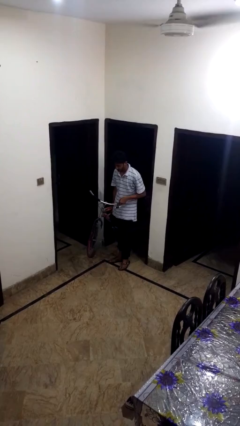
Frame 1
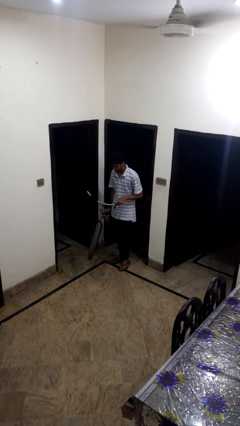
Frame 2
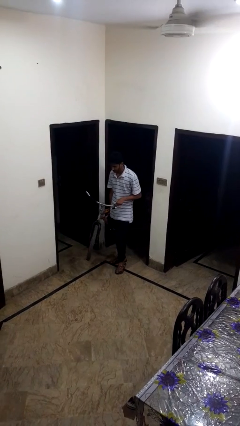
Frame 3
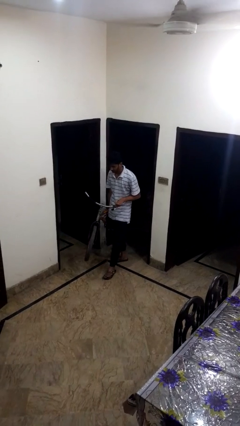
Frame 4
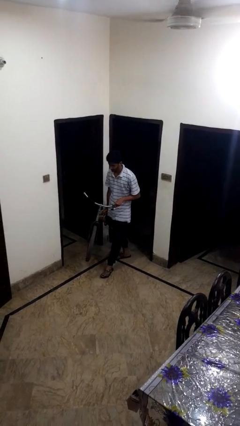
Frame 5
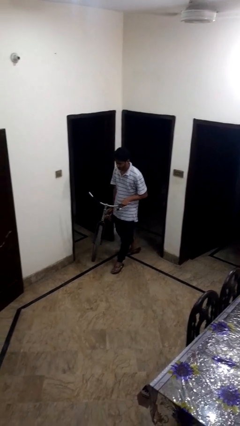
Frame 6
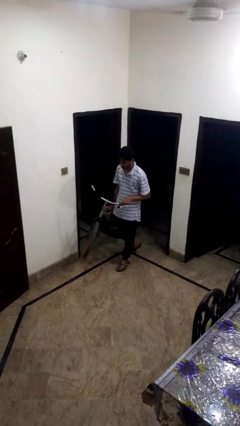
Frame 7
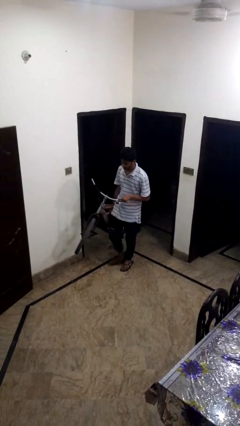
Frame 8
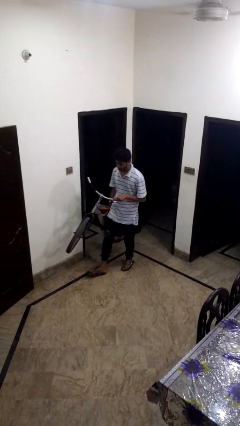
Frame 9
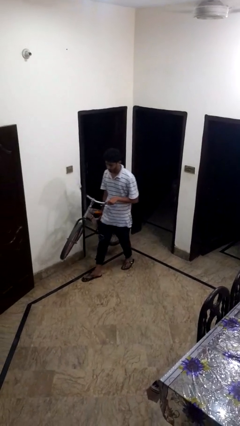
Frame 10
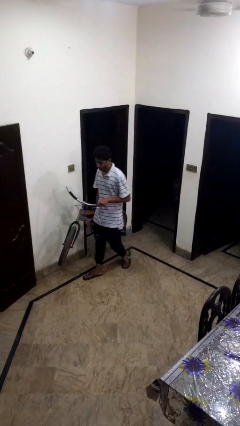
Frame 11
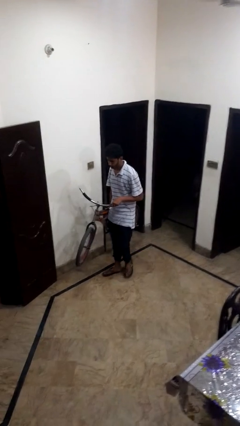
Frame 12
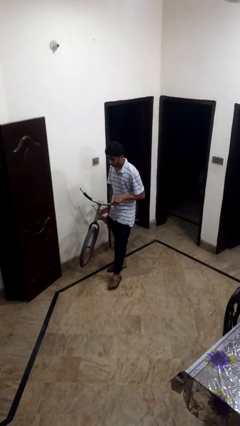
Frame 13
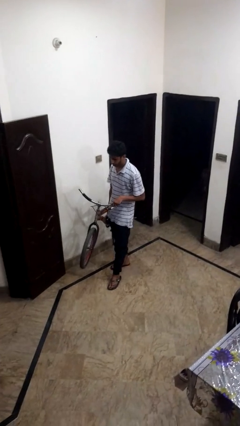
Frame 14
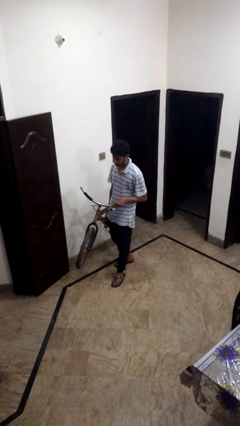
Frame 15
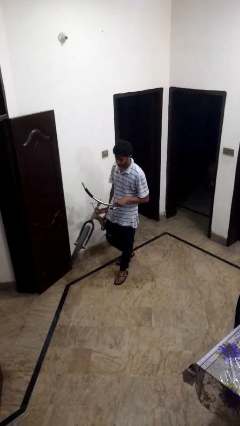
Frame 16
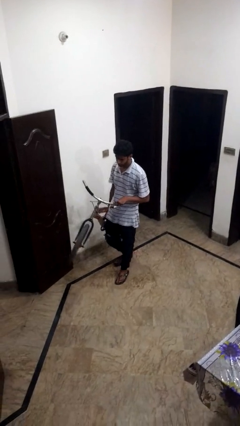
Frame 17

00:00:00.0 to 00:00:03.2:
person carries bicycle

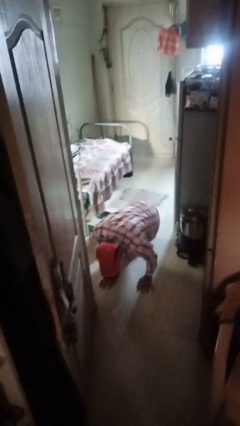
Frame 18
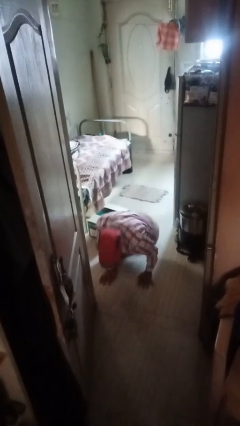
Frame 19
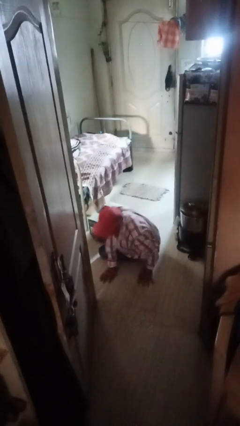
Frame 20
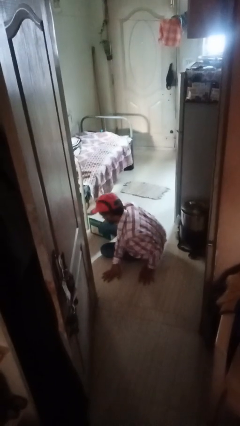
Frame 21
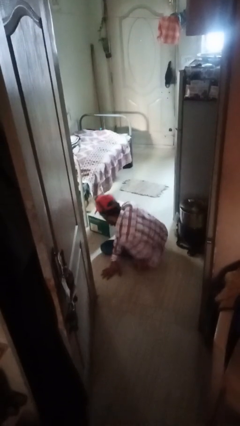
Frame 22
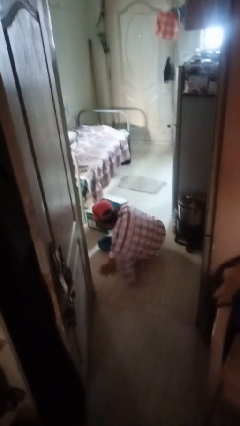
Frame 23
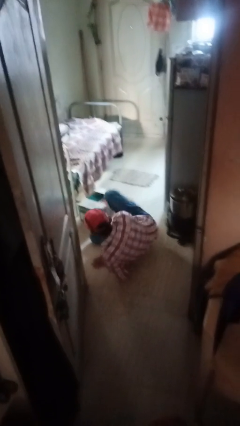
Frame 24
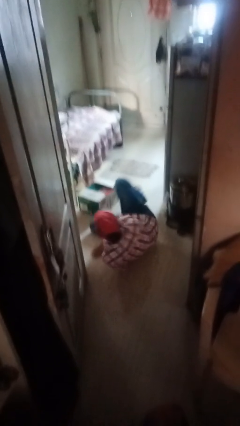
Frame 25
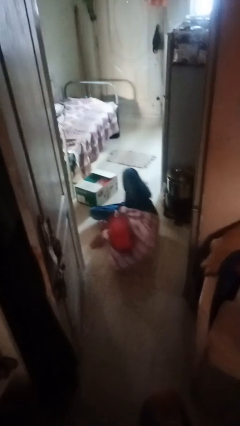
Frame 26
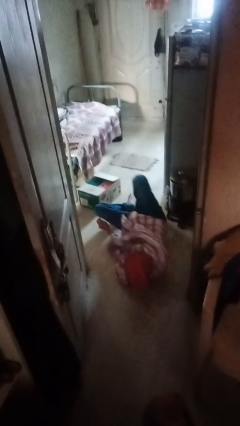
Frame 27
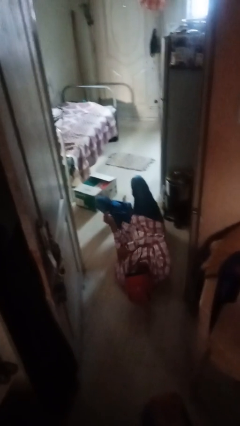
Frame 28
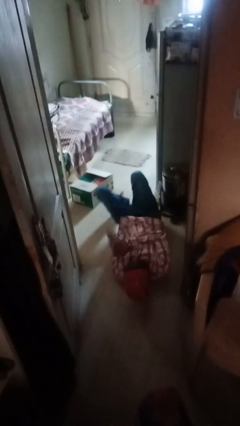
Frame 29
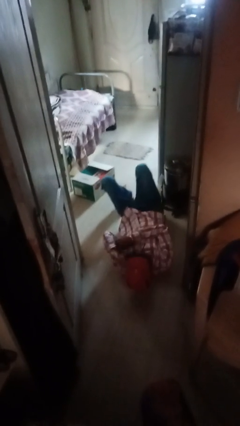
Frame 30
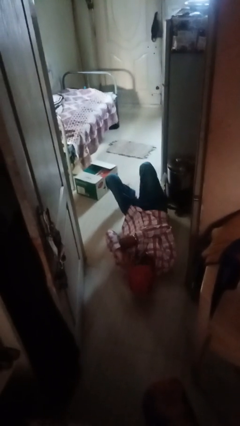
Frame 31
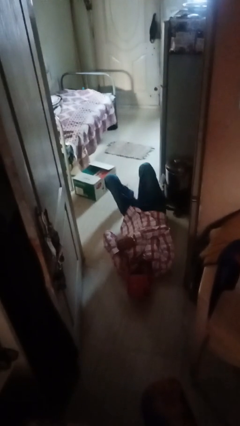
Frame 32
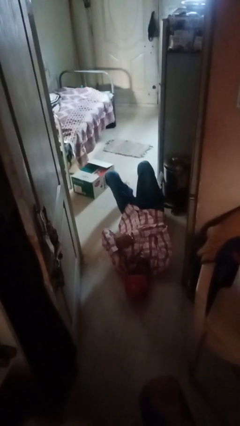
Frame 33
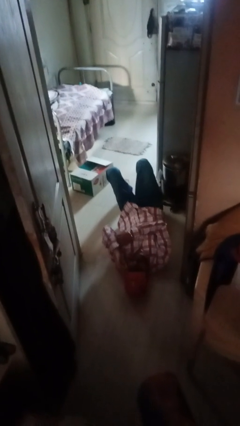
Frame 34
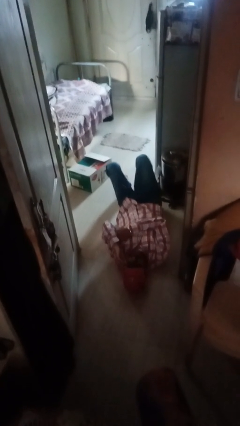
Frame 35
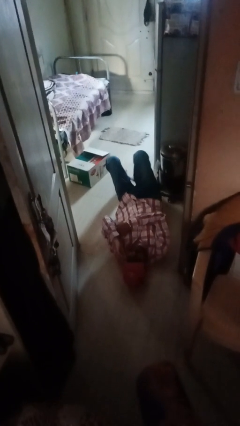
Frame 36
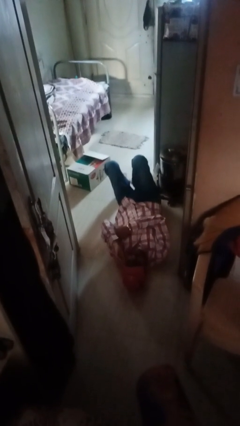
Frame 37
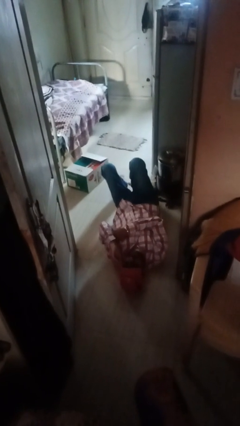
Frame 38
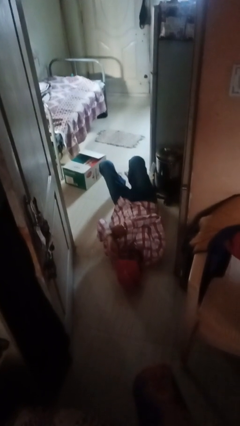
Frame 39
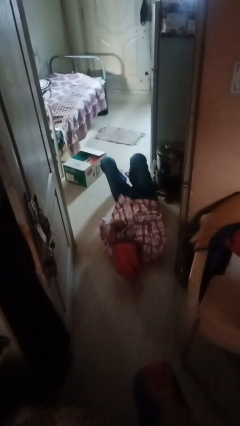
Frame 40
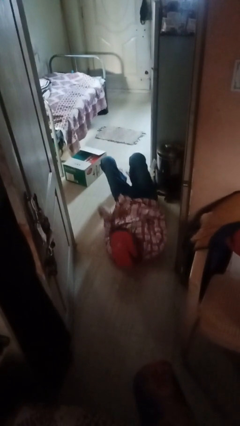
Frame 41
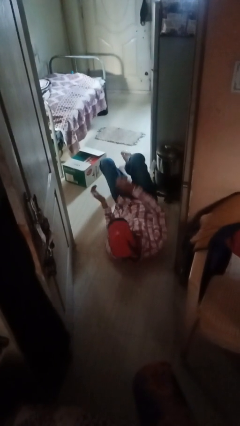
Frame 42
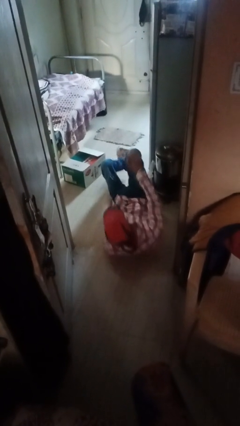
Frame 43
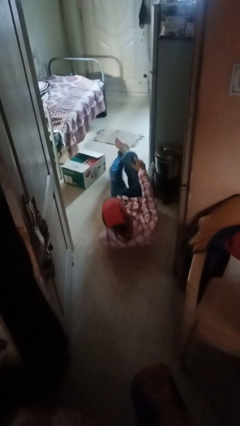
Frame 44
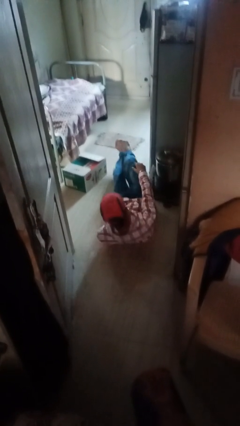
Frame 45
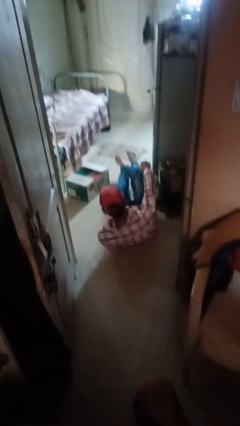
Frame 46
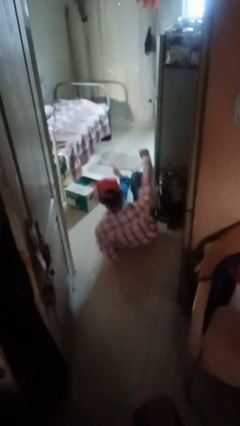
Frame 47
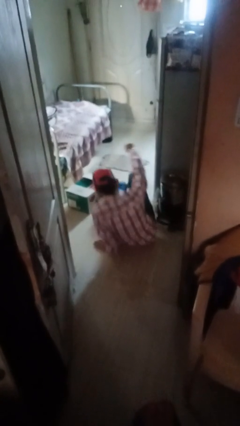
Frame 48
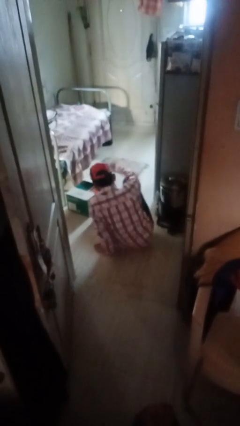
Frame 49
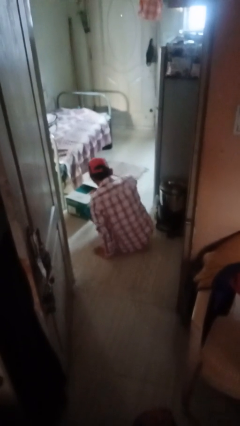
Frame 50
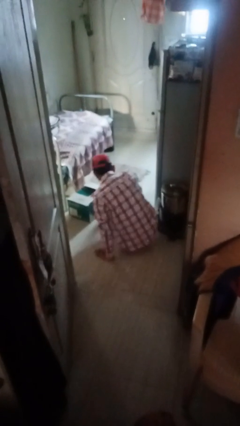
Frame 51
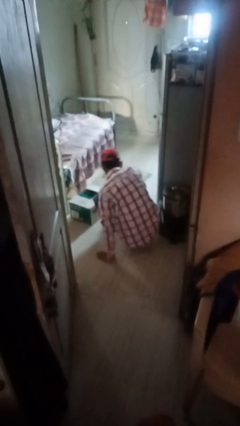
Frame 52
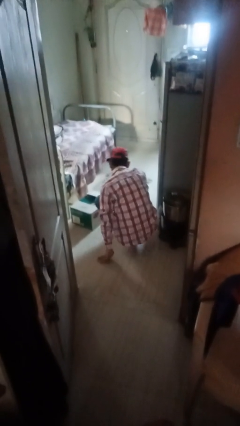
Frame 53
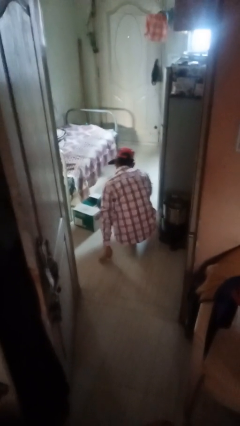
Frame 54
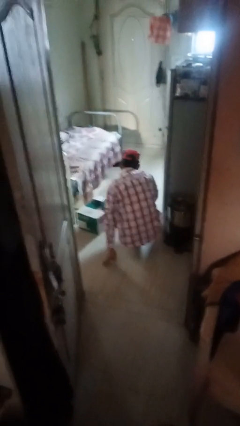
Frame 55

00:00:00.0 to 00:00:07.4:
person lies down on floor

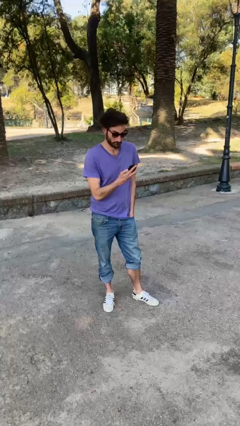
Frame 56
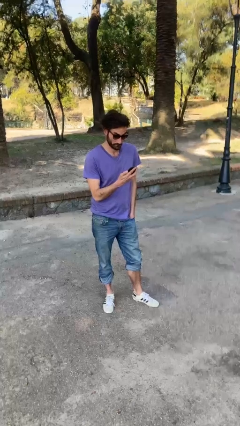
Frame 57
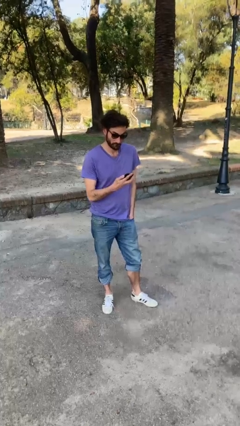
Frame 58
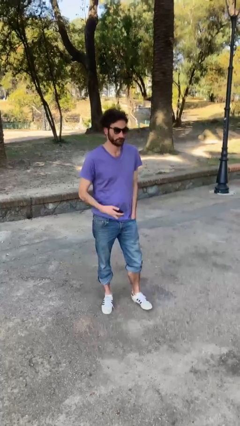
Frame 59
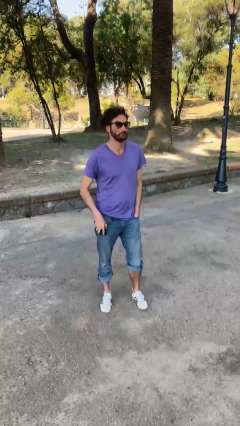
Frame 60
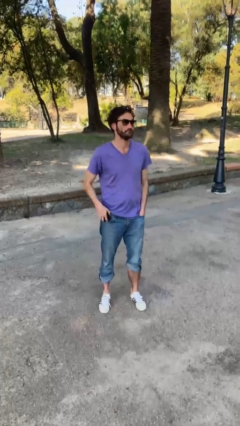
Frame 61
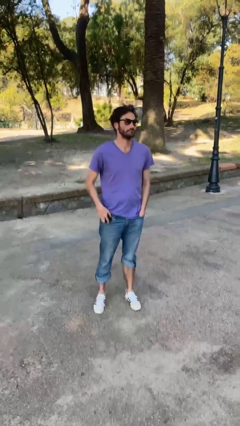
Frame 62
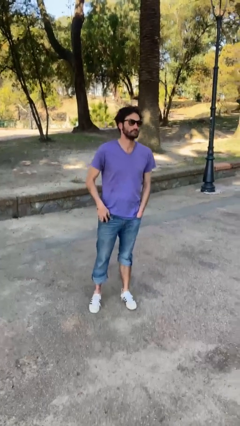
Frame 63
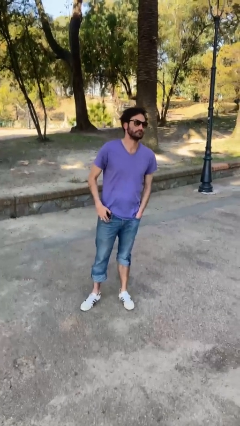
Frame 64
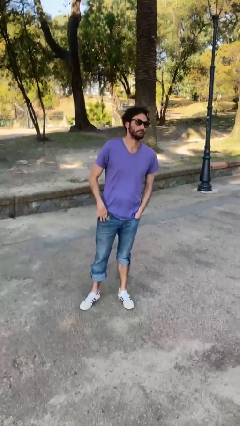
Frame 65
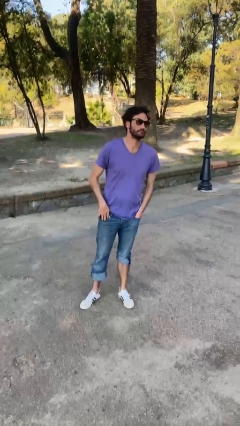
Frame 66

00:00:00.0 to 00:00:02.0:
person puts phone into pocket

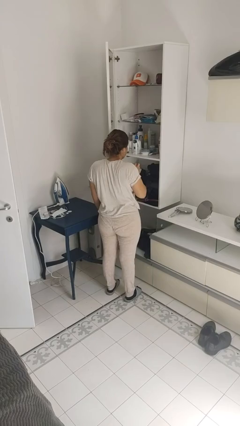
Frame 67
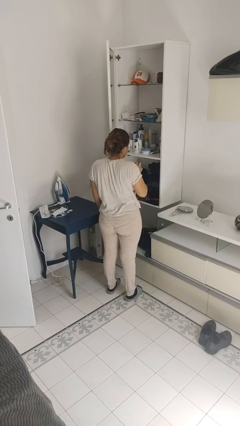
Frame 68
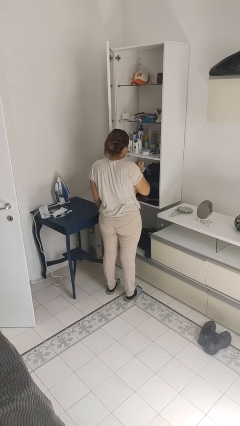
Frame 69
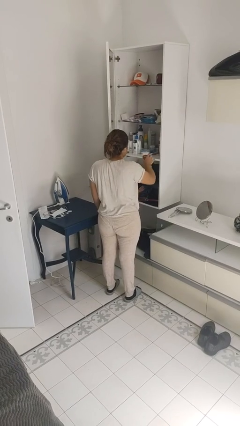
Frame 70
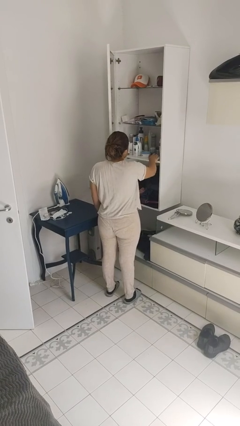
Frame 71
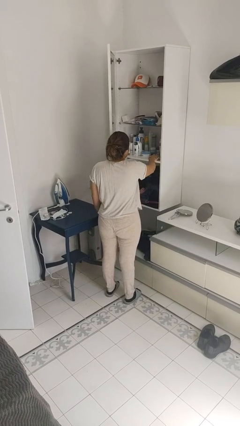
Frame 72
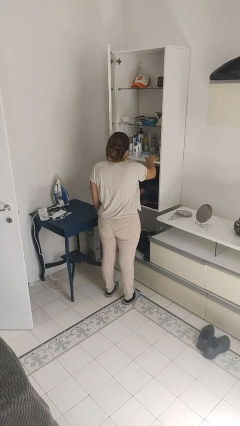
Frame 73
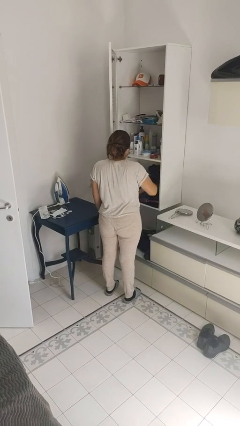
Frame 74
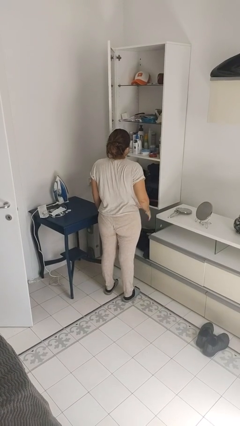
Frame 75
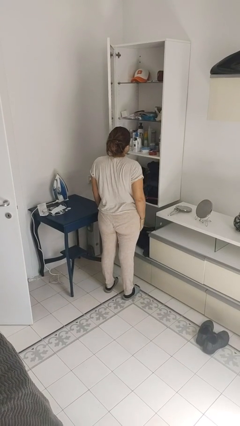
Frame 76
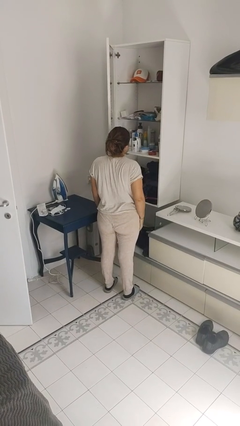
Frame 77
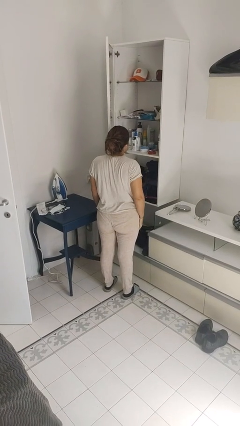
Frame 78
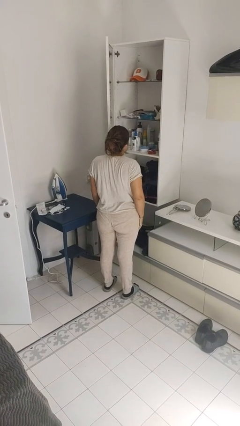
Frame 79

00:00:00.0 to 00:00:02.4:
person puts down object on shelf

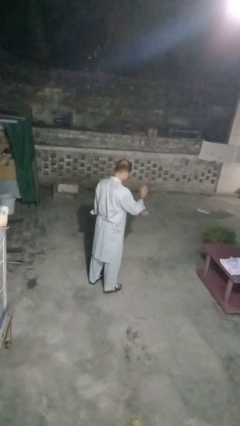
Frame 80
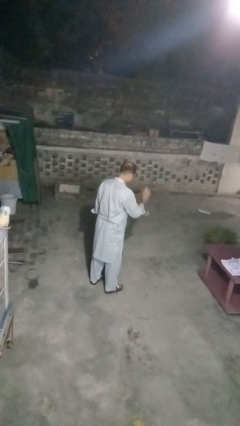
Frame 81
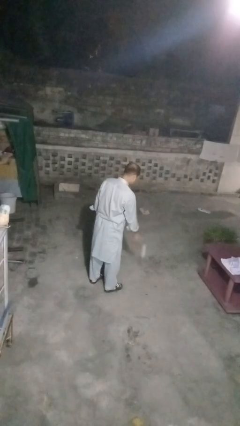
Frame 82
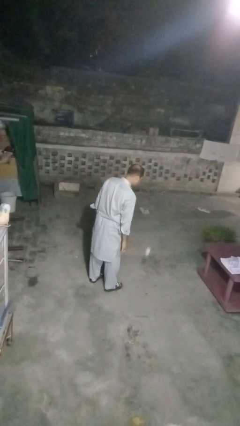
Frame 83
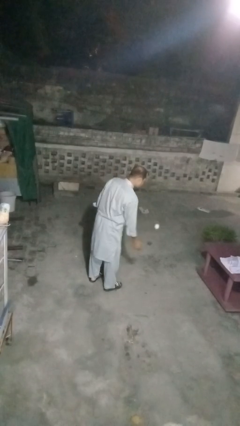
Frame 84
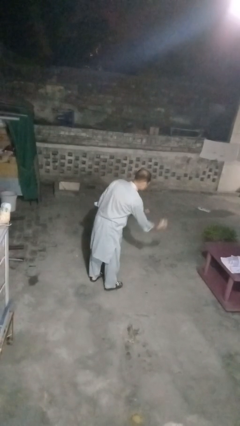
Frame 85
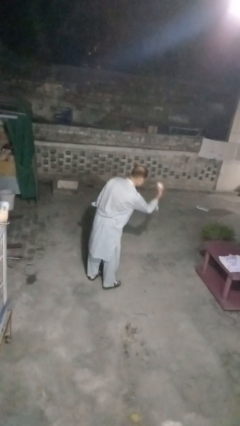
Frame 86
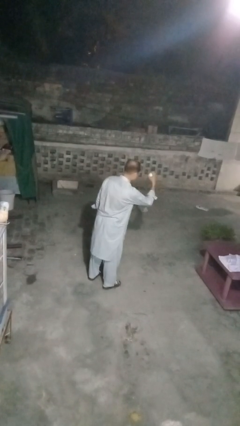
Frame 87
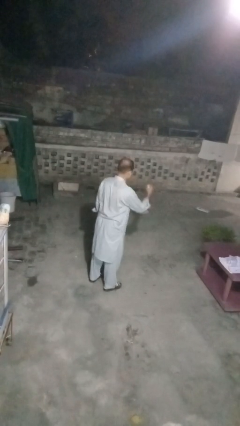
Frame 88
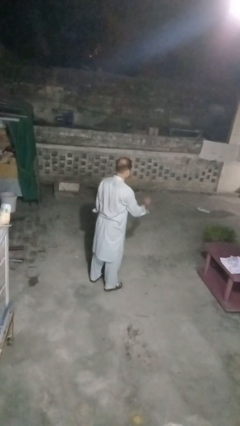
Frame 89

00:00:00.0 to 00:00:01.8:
person bounces ball on floor

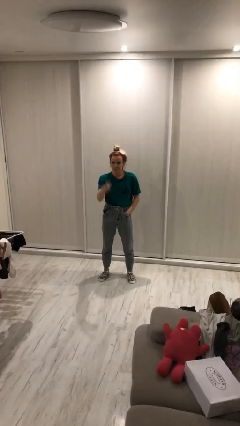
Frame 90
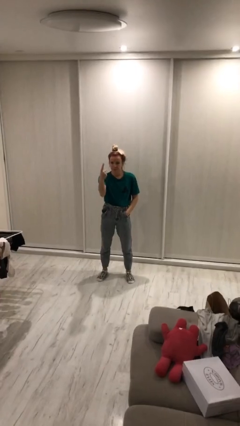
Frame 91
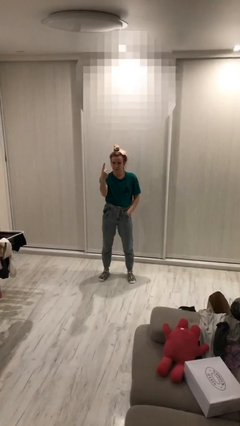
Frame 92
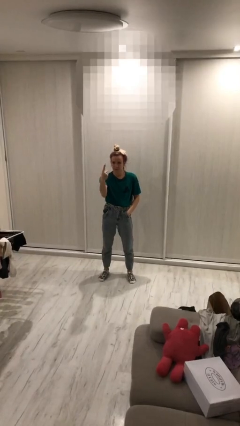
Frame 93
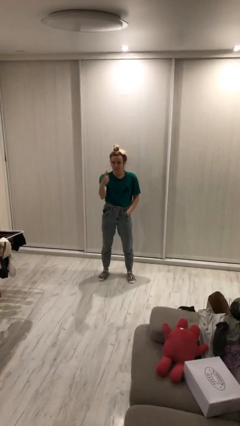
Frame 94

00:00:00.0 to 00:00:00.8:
person gestures number one
